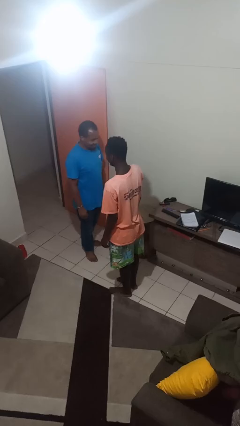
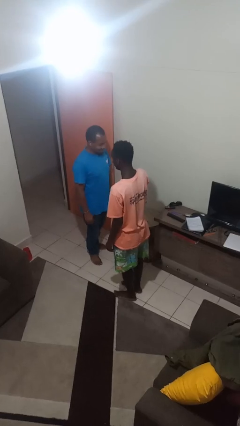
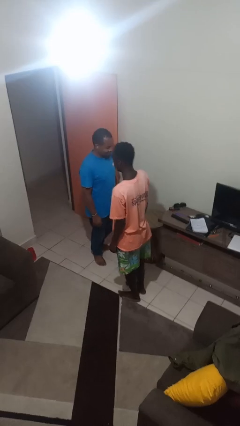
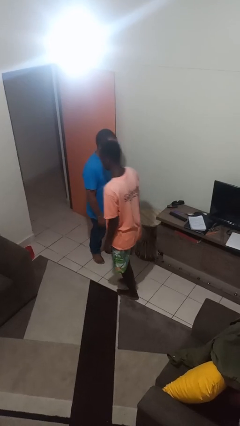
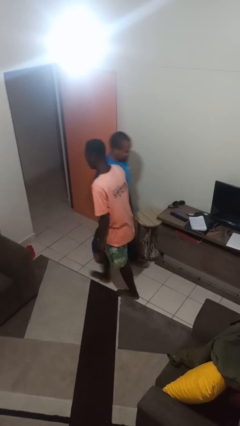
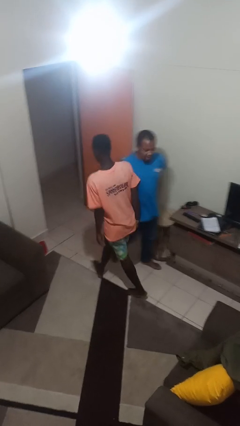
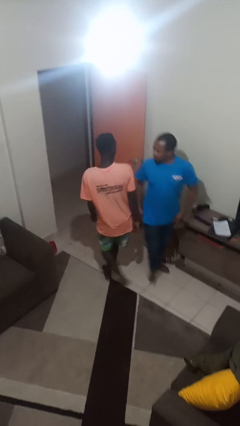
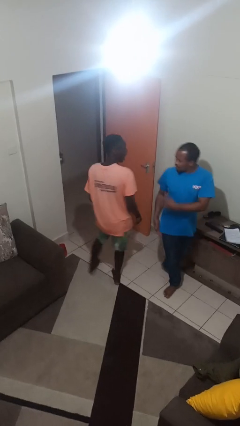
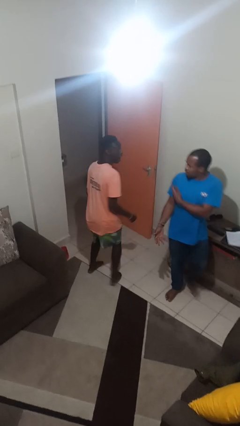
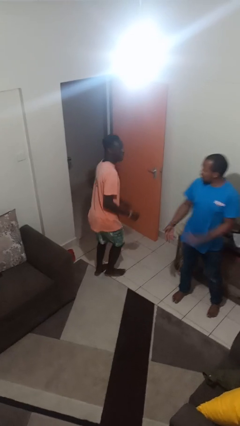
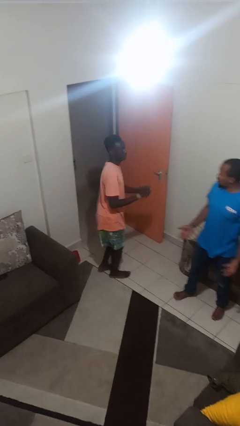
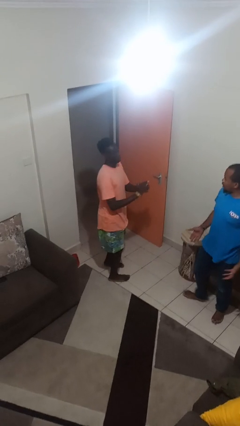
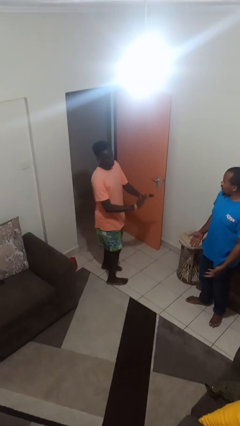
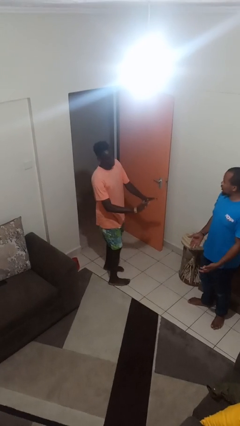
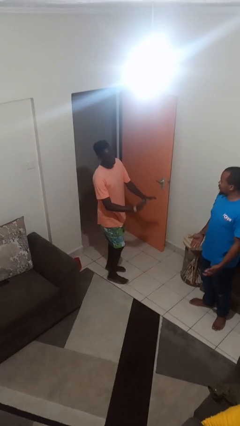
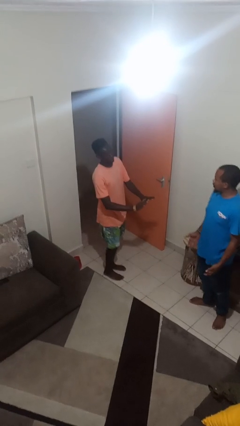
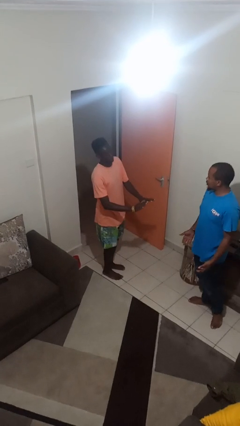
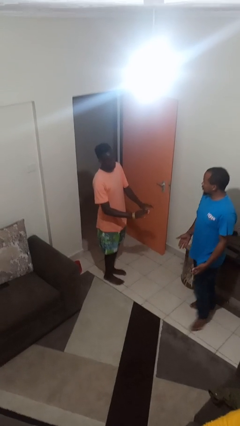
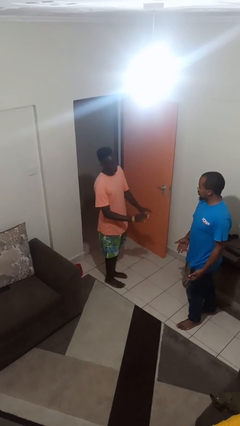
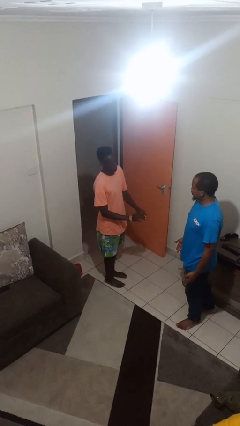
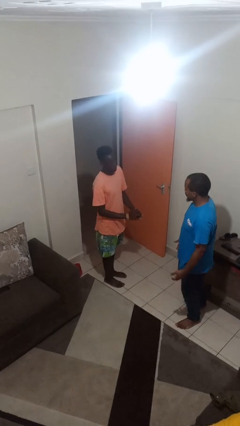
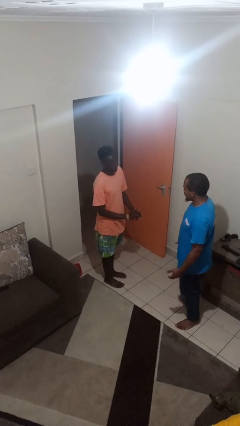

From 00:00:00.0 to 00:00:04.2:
person bumps into person

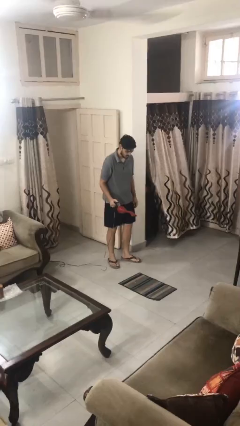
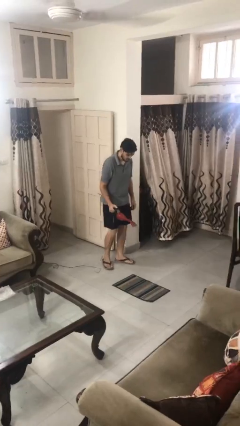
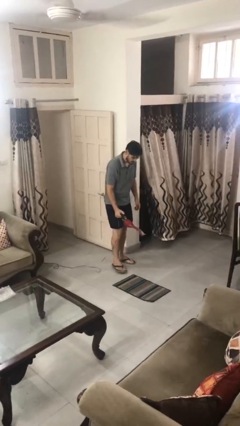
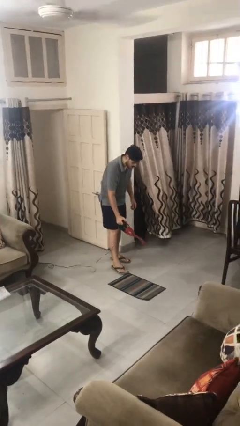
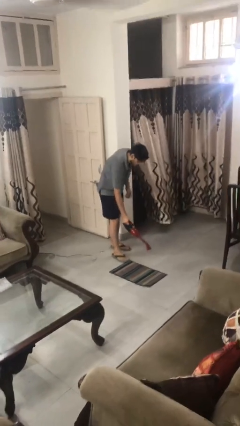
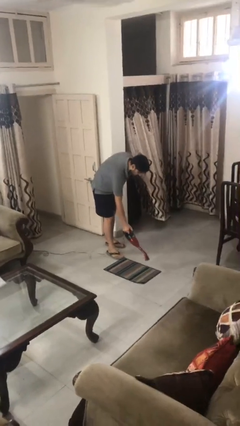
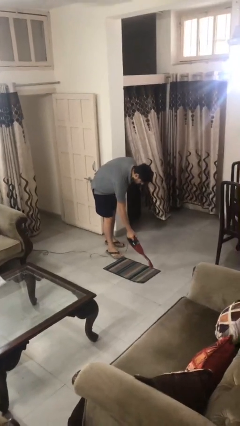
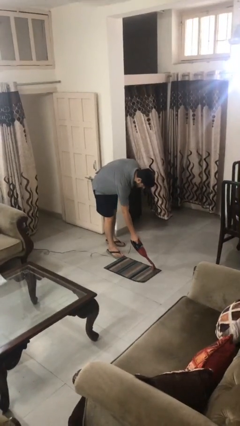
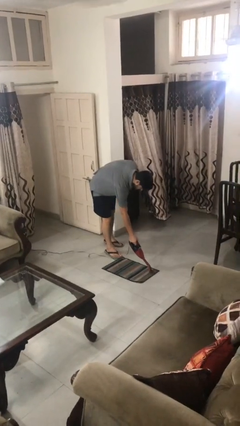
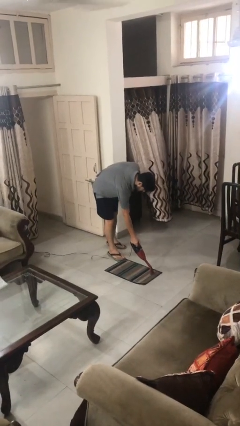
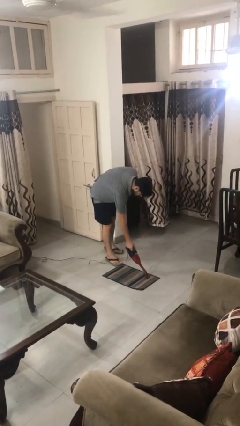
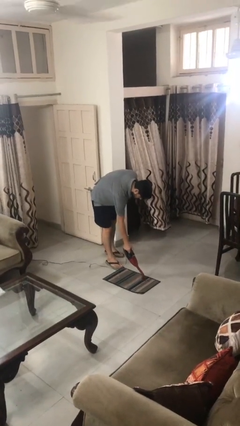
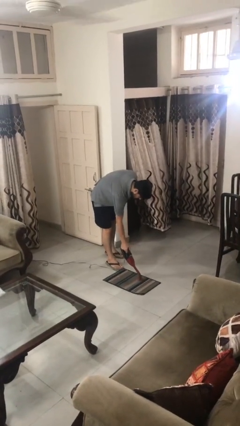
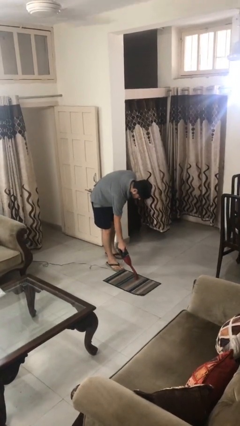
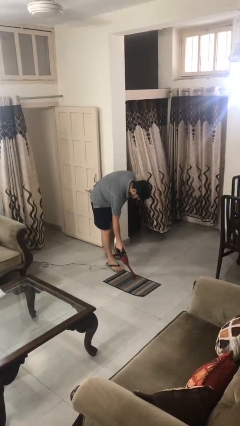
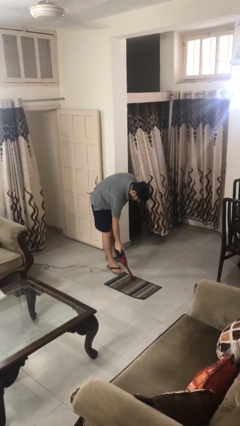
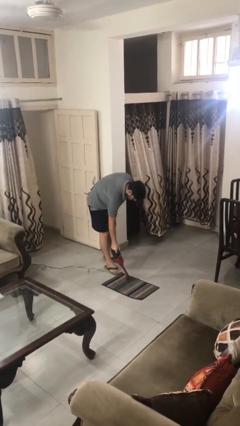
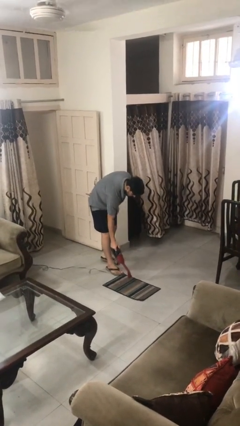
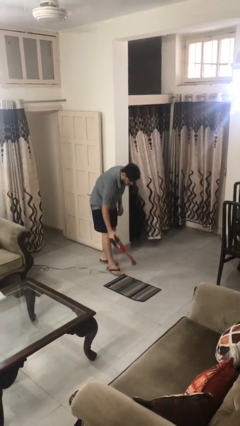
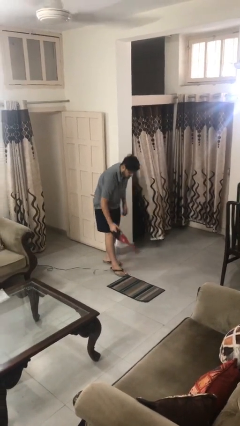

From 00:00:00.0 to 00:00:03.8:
person vacuums carpet

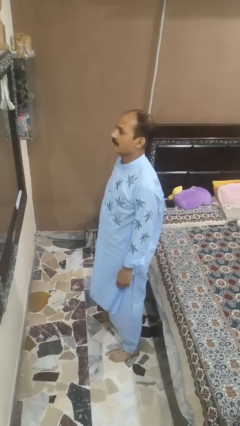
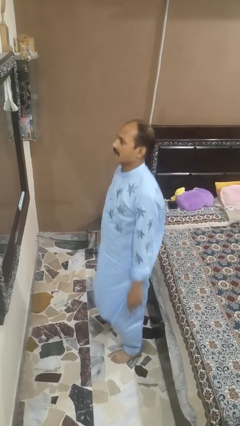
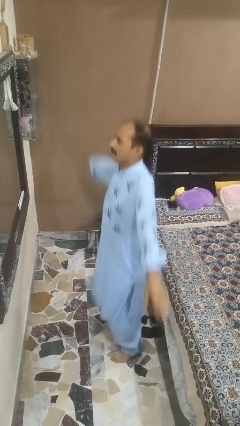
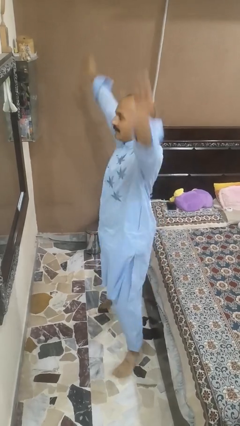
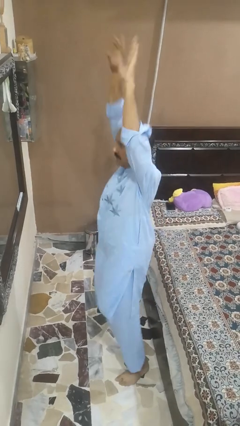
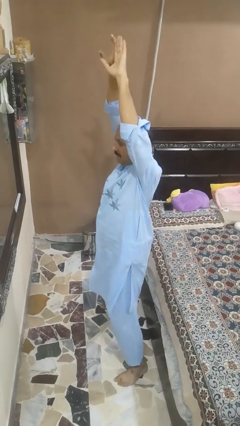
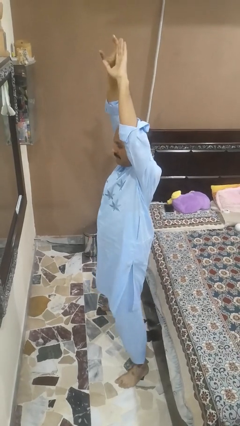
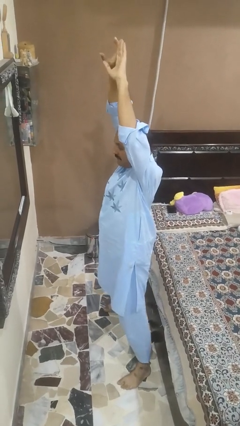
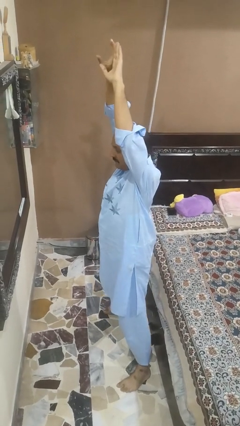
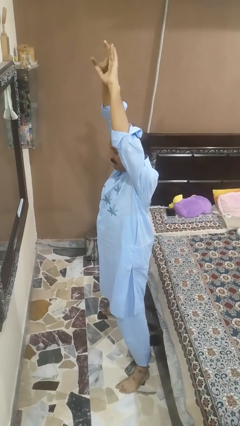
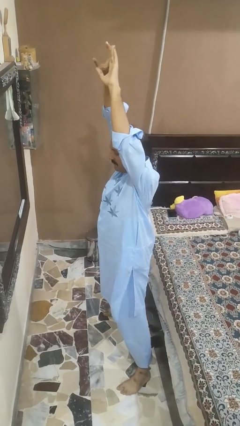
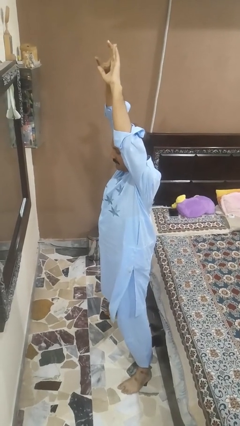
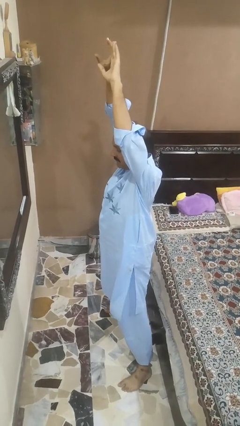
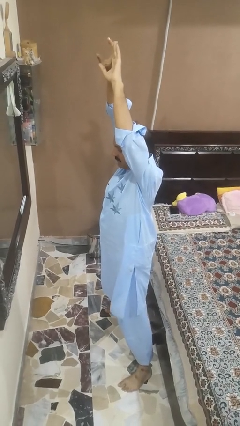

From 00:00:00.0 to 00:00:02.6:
person exercises with jumping jacks

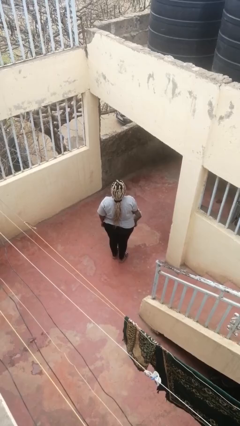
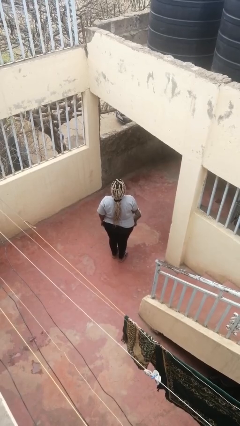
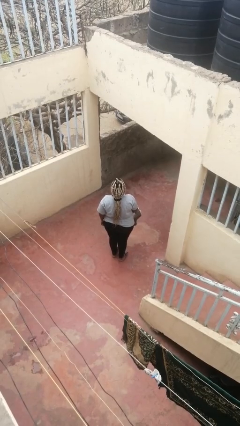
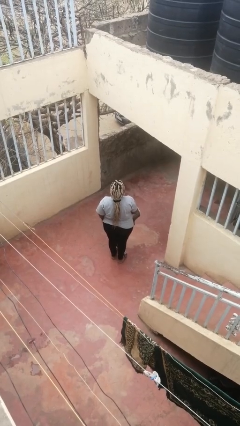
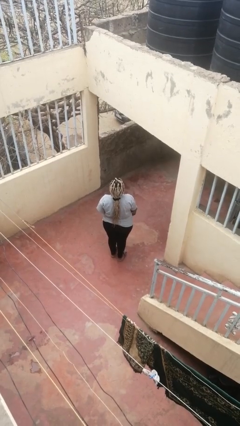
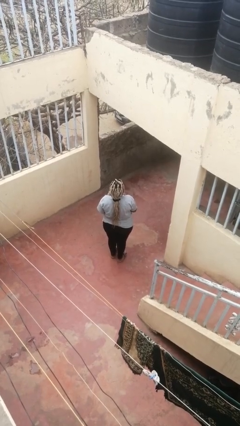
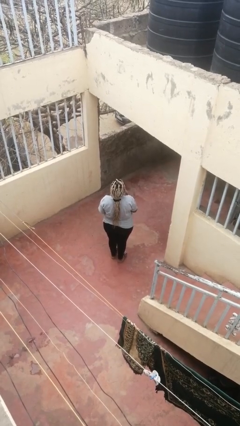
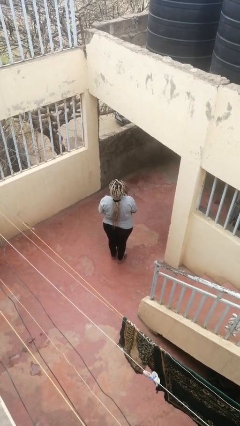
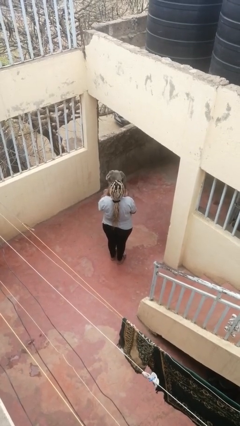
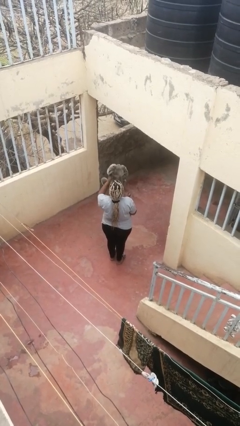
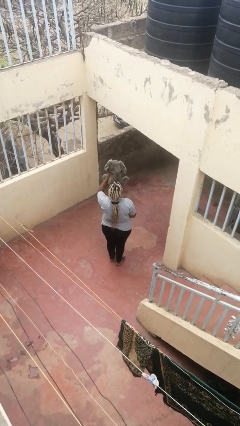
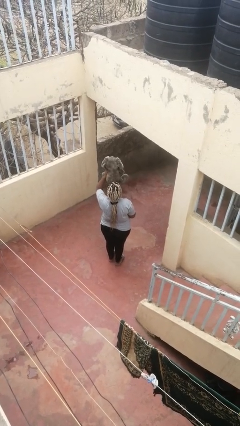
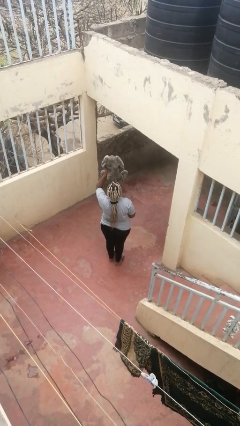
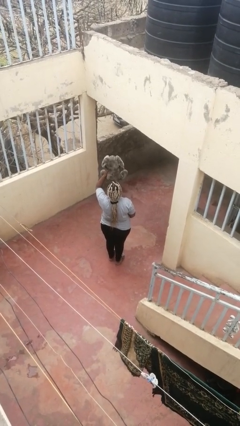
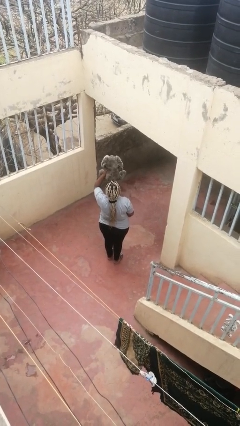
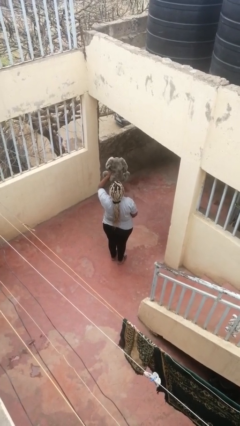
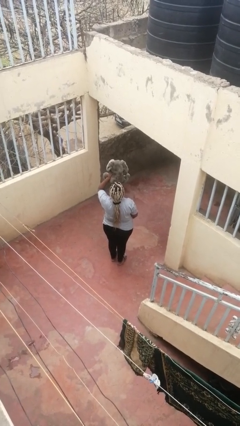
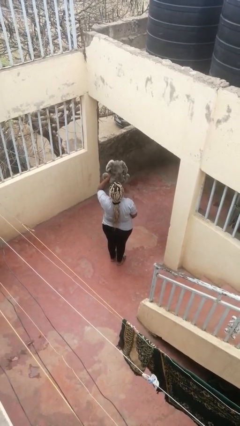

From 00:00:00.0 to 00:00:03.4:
person holds object above head

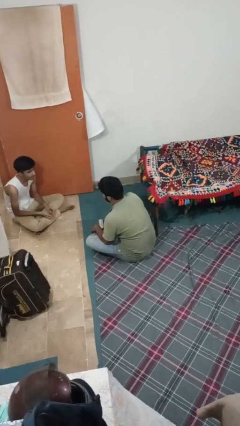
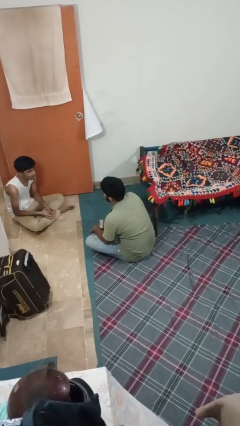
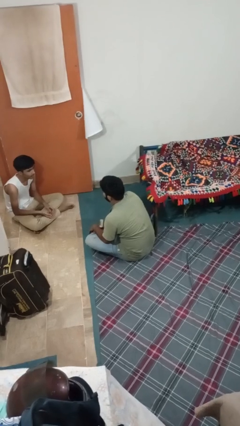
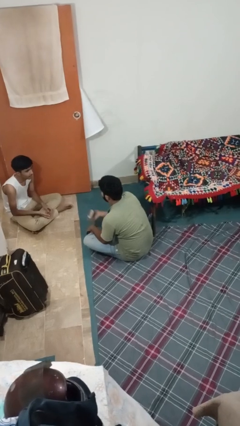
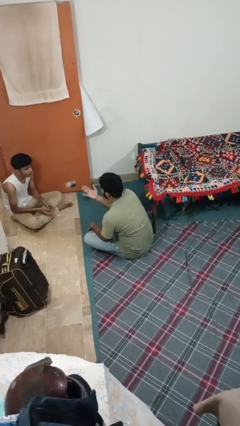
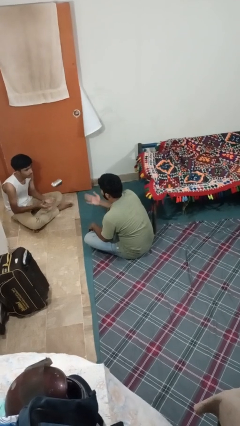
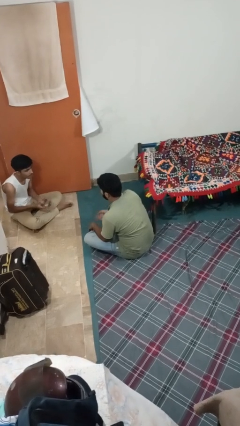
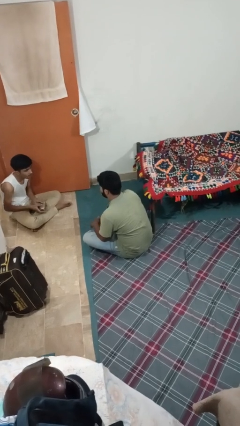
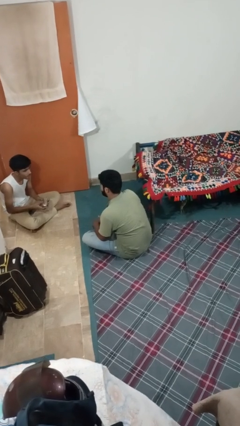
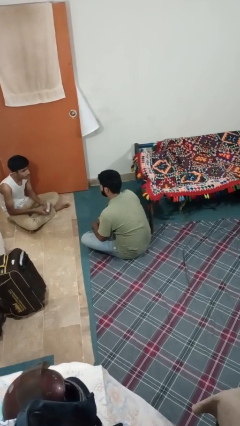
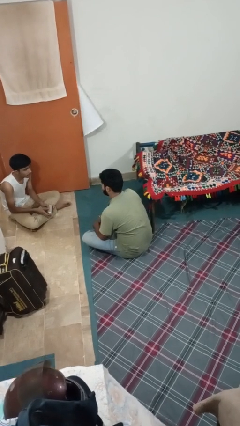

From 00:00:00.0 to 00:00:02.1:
person throws object to person

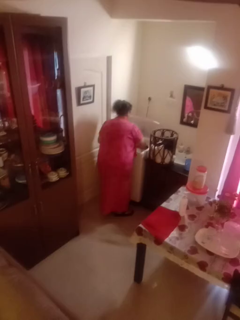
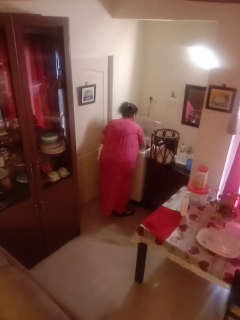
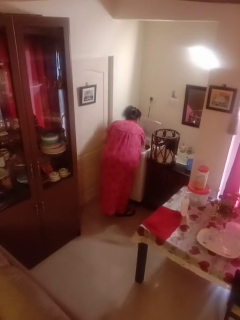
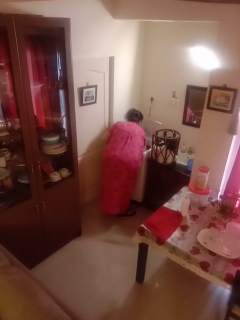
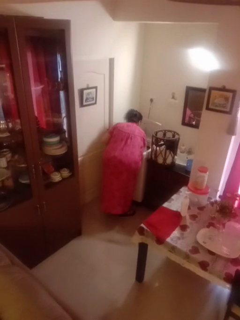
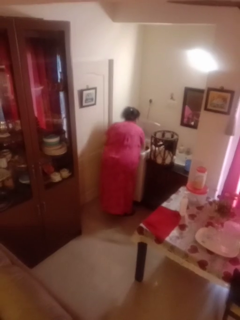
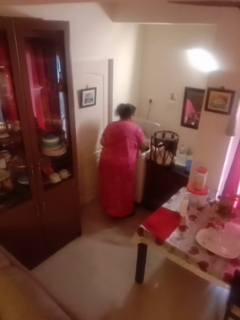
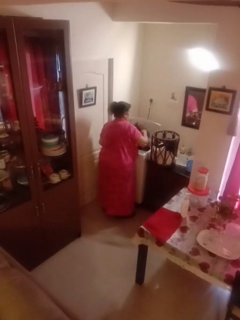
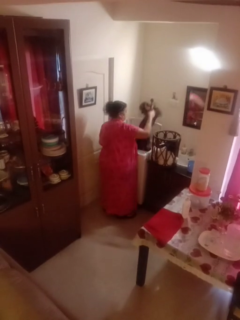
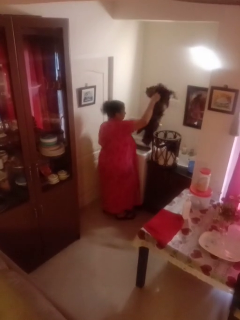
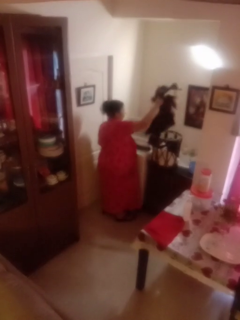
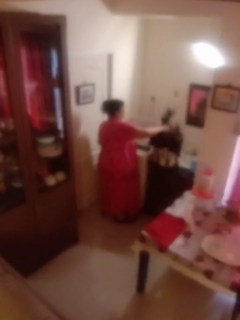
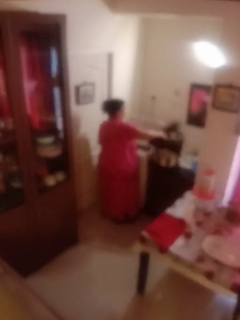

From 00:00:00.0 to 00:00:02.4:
person unloads clotheswasher
